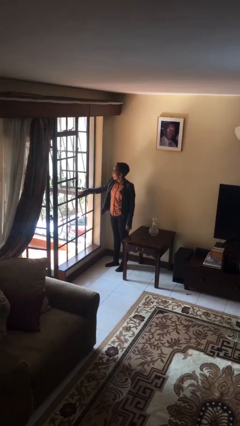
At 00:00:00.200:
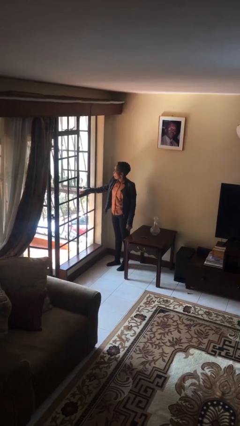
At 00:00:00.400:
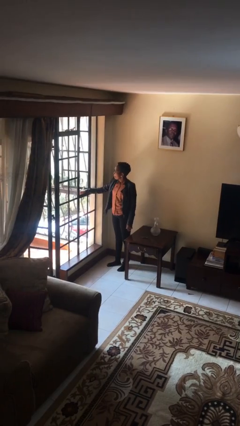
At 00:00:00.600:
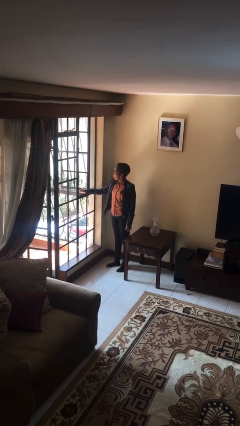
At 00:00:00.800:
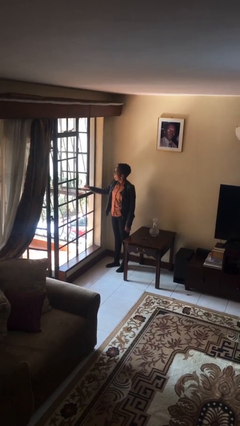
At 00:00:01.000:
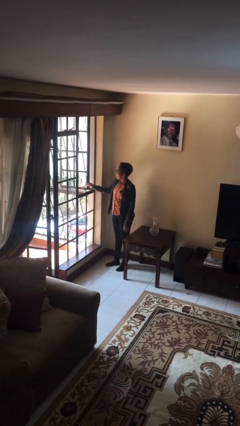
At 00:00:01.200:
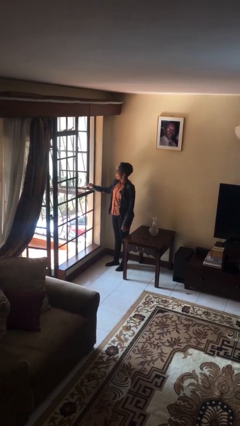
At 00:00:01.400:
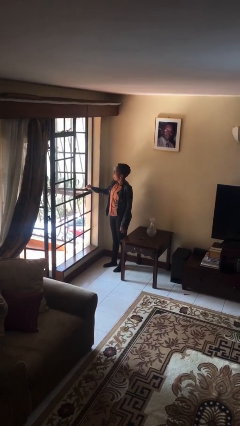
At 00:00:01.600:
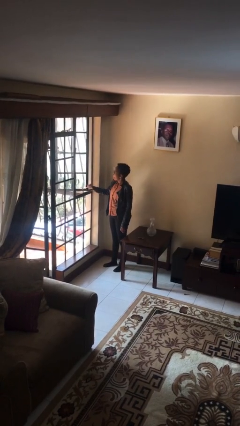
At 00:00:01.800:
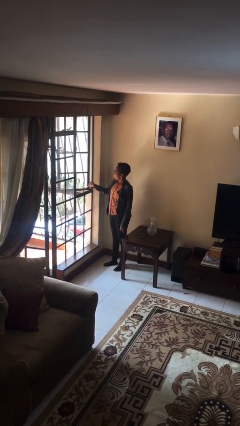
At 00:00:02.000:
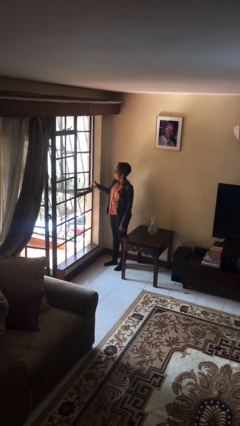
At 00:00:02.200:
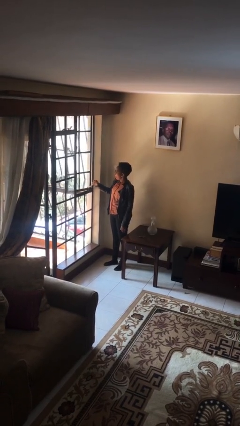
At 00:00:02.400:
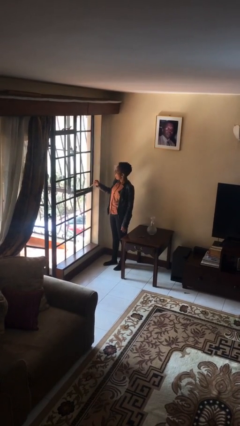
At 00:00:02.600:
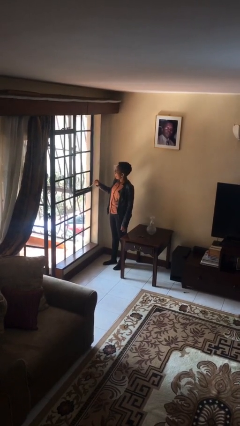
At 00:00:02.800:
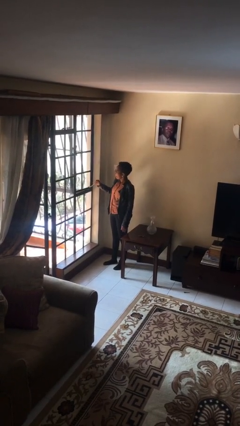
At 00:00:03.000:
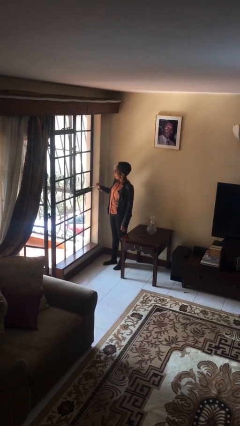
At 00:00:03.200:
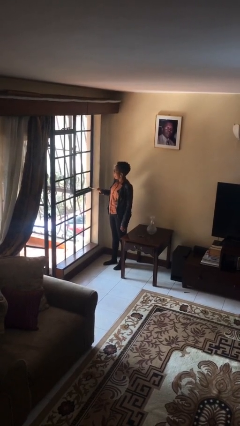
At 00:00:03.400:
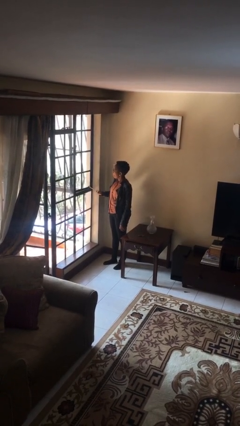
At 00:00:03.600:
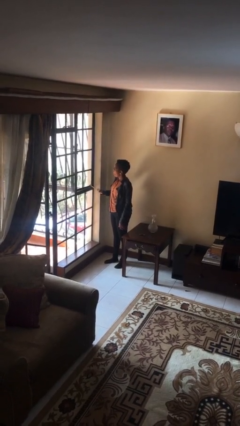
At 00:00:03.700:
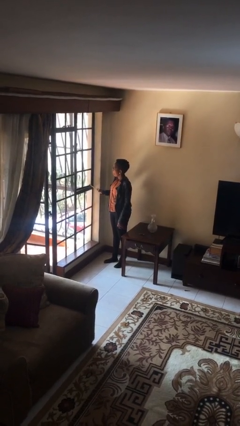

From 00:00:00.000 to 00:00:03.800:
person closes home window

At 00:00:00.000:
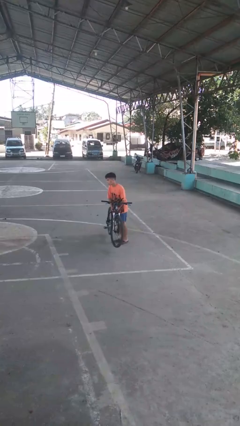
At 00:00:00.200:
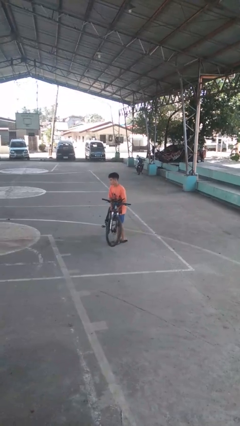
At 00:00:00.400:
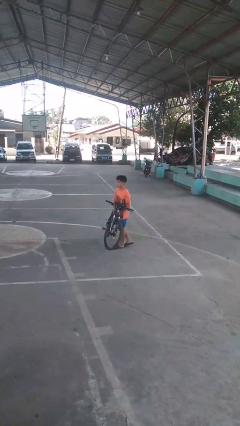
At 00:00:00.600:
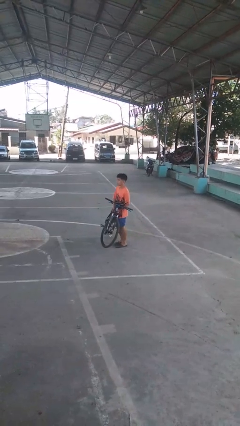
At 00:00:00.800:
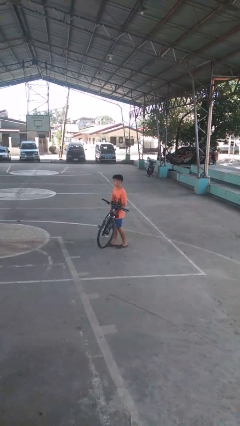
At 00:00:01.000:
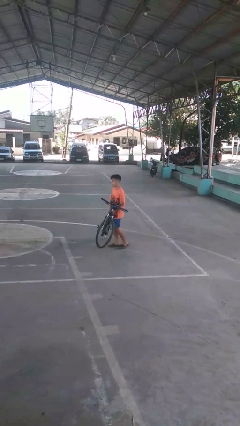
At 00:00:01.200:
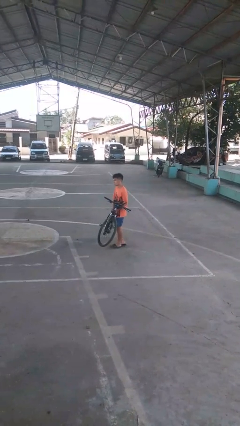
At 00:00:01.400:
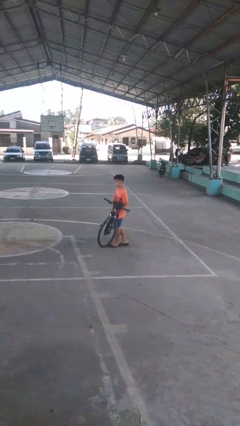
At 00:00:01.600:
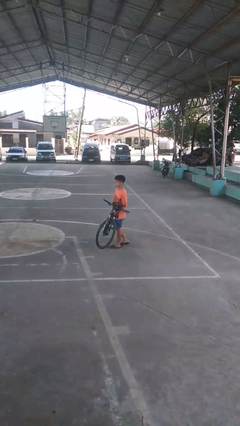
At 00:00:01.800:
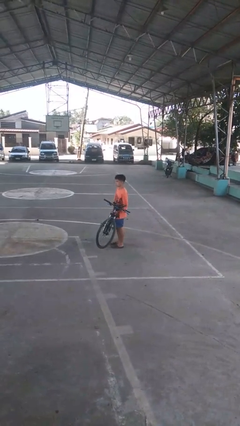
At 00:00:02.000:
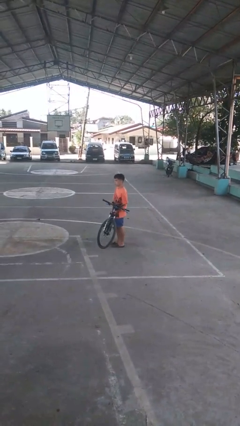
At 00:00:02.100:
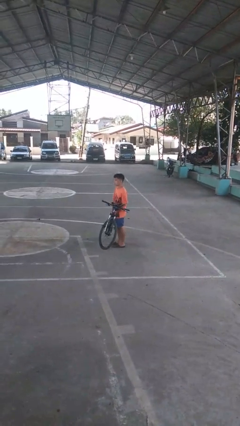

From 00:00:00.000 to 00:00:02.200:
person carries bicycle

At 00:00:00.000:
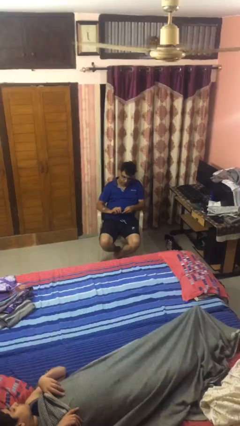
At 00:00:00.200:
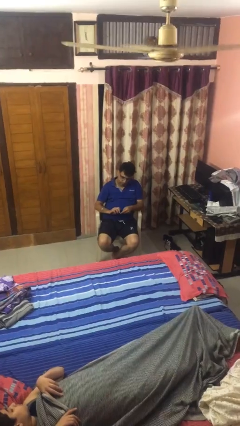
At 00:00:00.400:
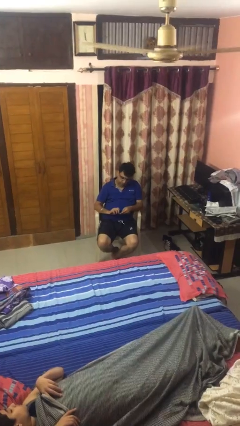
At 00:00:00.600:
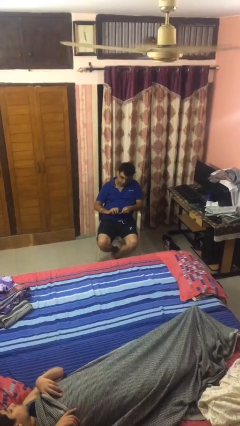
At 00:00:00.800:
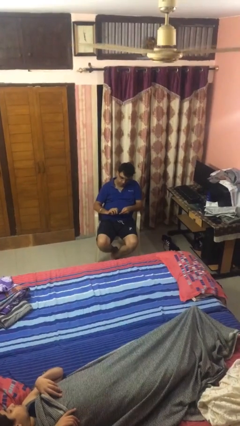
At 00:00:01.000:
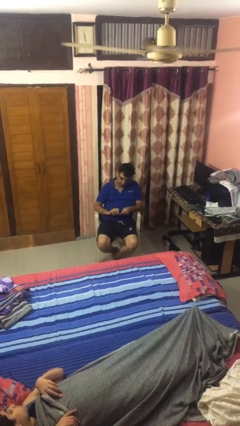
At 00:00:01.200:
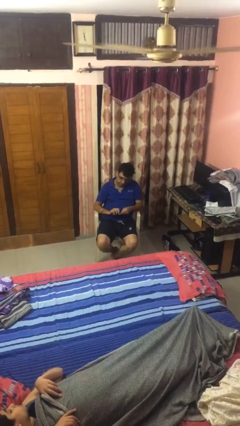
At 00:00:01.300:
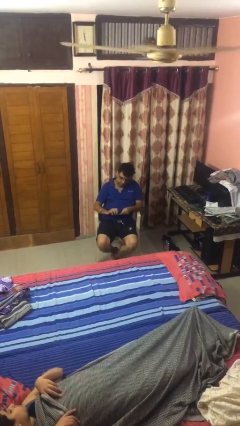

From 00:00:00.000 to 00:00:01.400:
person files fingernails

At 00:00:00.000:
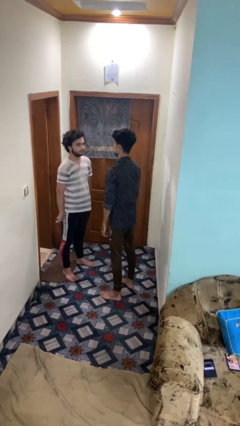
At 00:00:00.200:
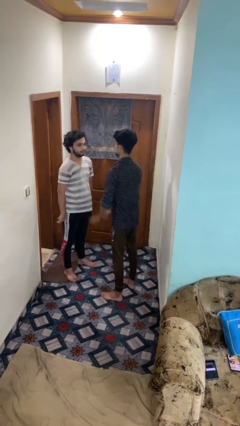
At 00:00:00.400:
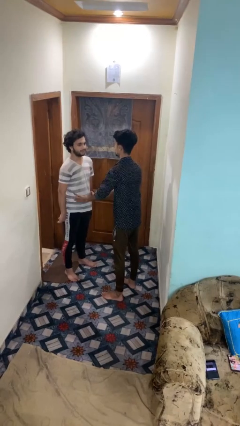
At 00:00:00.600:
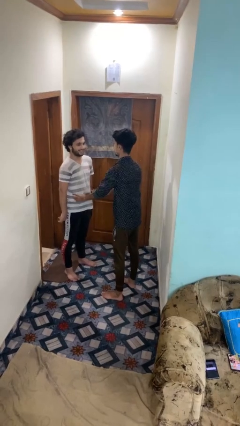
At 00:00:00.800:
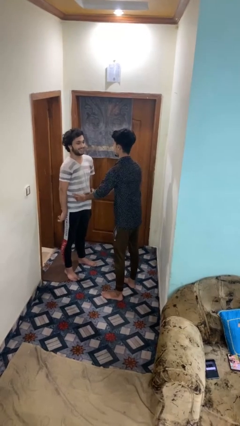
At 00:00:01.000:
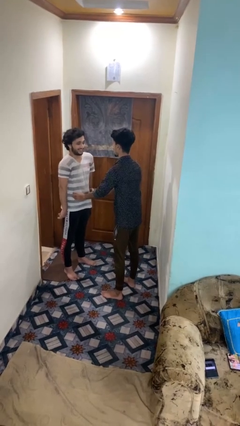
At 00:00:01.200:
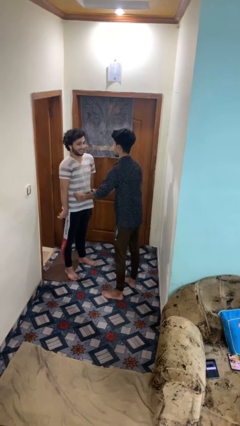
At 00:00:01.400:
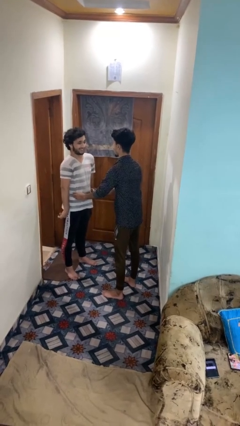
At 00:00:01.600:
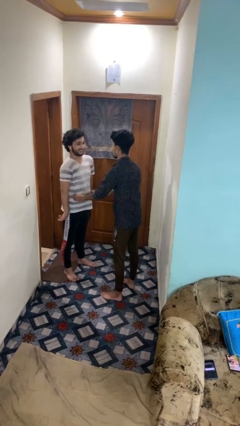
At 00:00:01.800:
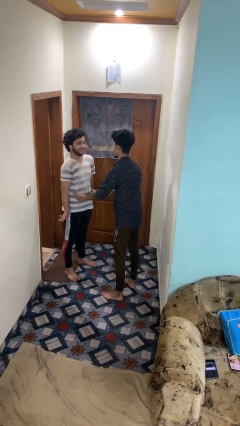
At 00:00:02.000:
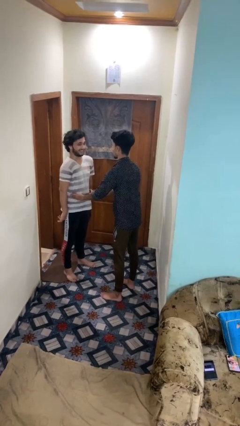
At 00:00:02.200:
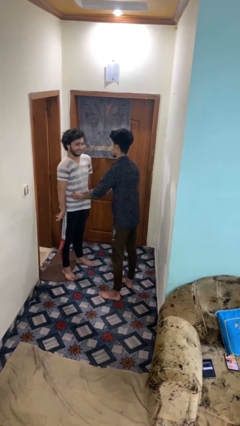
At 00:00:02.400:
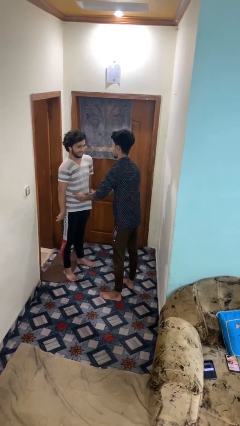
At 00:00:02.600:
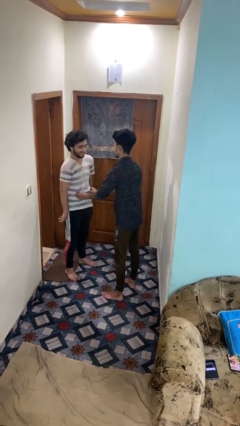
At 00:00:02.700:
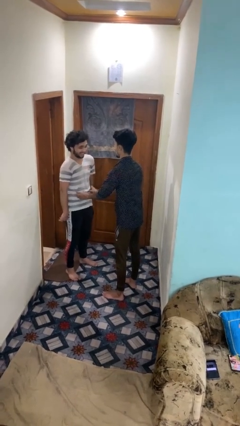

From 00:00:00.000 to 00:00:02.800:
person tickles person

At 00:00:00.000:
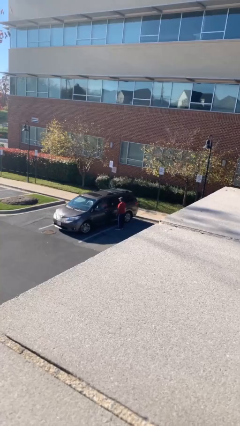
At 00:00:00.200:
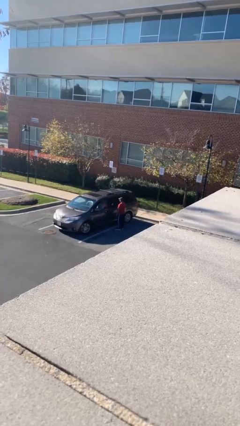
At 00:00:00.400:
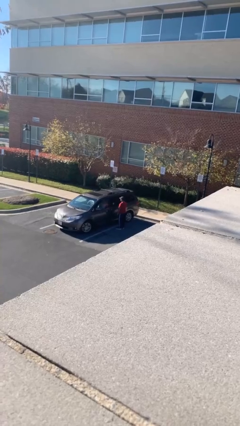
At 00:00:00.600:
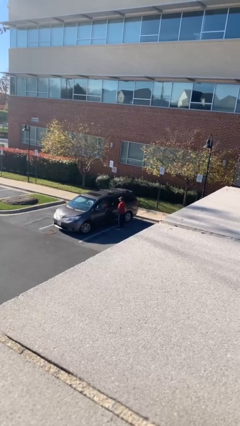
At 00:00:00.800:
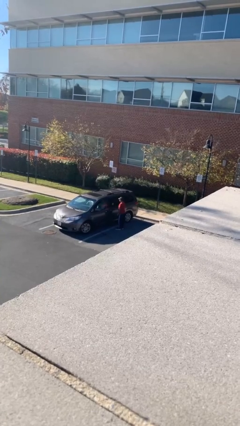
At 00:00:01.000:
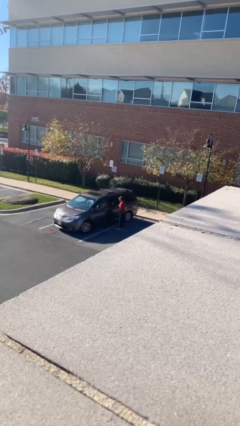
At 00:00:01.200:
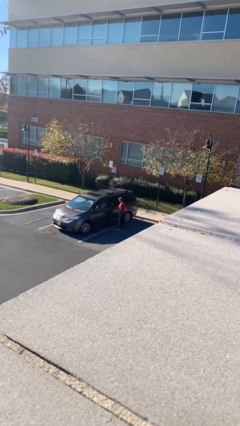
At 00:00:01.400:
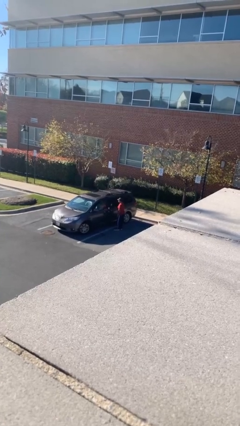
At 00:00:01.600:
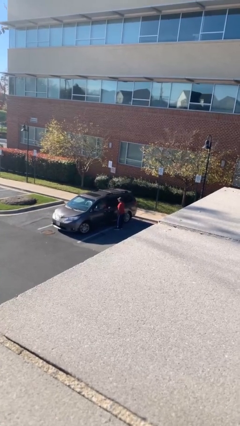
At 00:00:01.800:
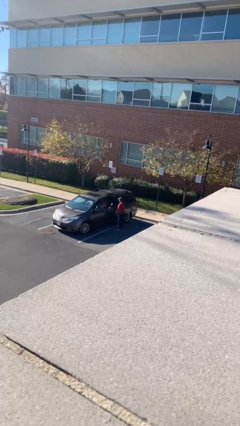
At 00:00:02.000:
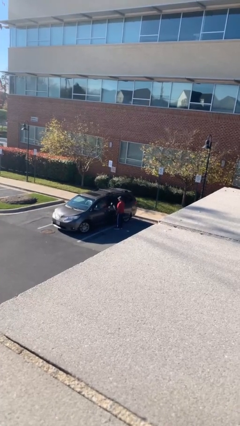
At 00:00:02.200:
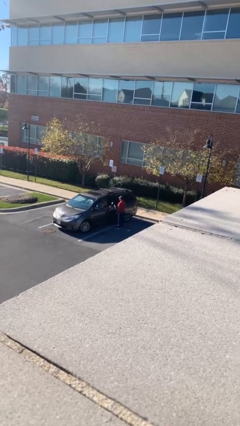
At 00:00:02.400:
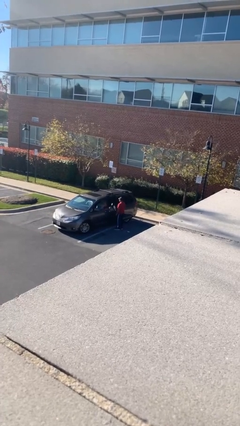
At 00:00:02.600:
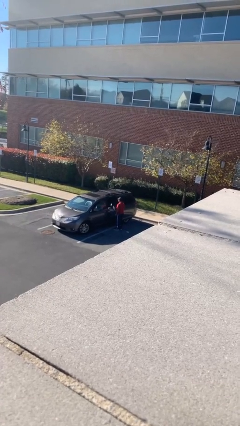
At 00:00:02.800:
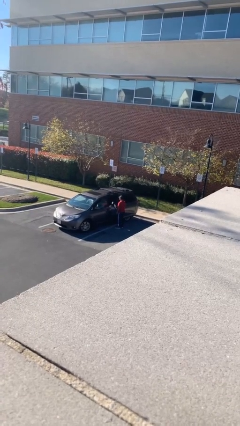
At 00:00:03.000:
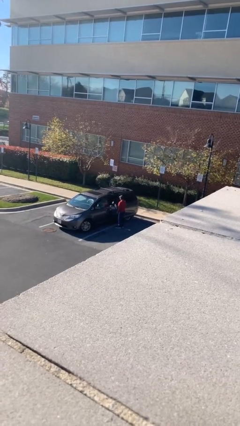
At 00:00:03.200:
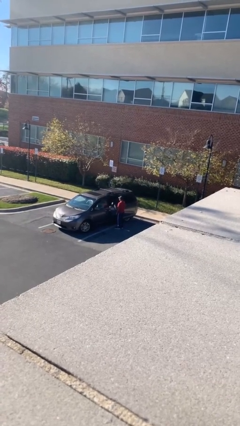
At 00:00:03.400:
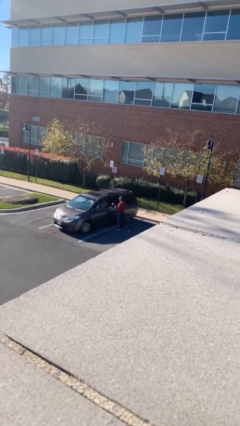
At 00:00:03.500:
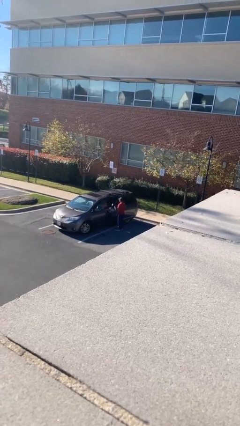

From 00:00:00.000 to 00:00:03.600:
person opens car door

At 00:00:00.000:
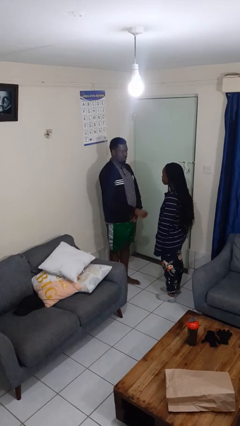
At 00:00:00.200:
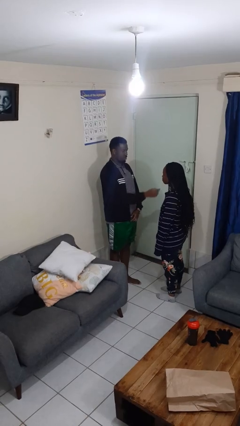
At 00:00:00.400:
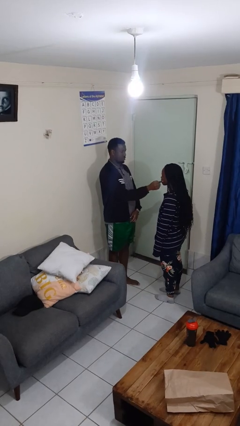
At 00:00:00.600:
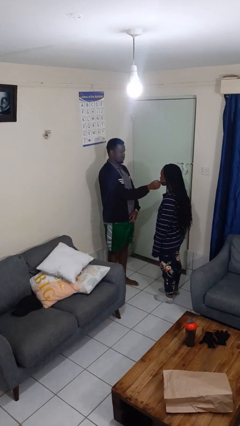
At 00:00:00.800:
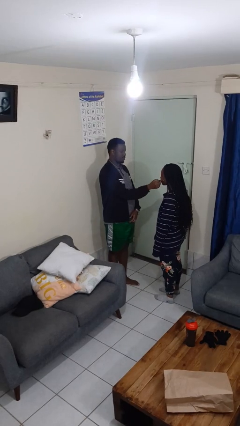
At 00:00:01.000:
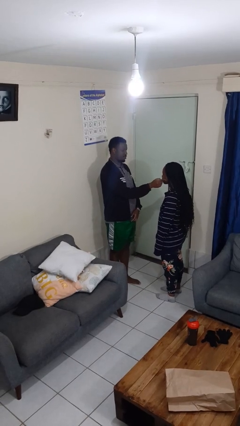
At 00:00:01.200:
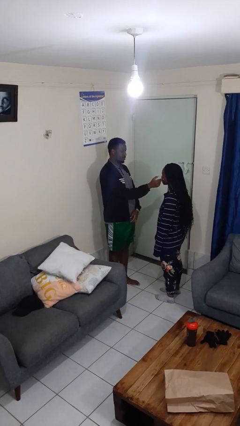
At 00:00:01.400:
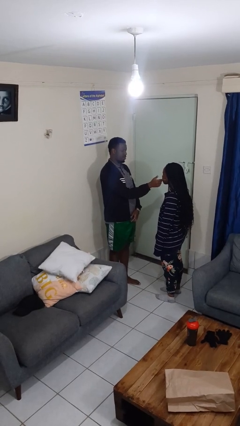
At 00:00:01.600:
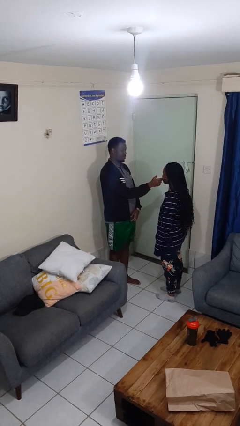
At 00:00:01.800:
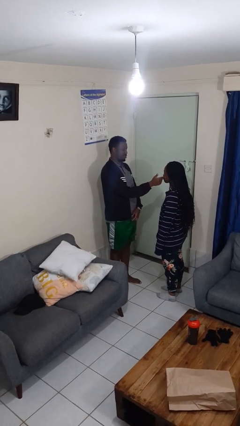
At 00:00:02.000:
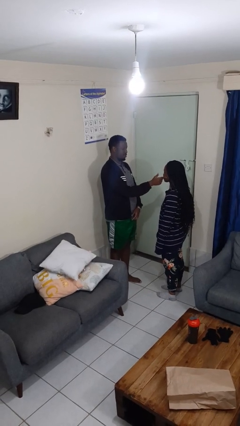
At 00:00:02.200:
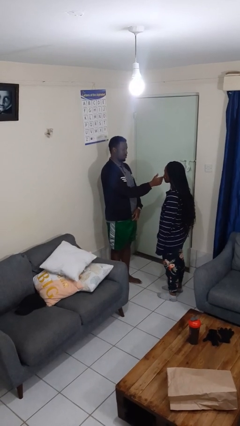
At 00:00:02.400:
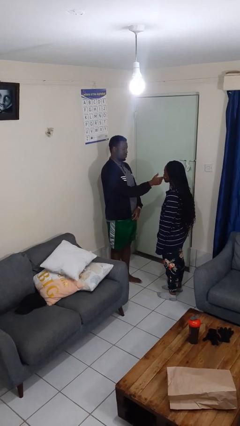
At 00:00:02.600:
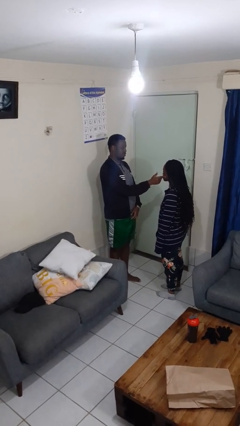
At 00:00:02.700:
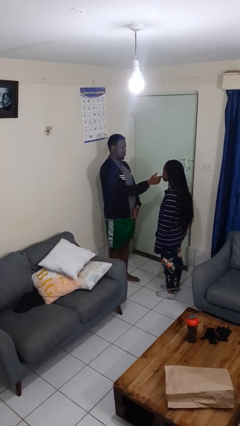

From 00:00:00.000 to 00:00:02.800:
person touches face of person

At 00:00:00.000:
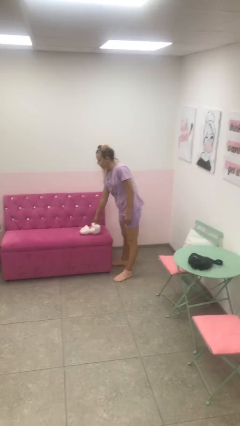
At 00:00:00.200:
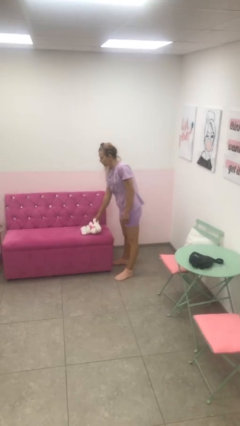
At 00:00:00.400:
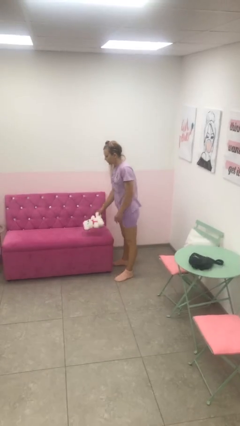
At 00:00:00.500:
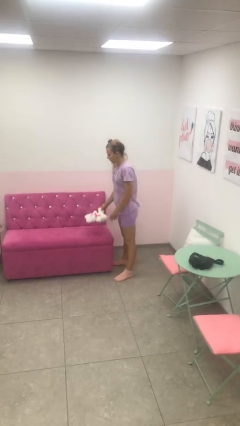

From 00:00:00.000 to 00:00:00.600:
person picks up object from couch
